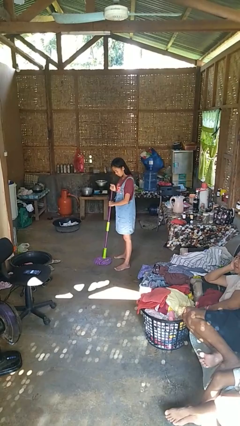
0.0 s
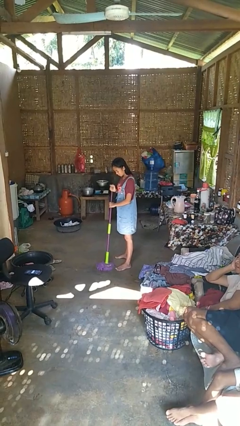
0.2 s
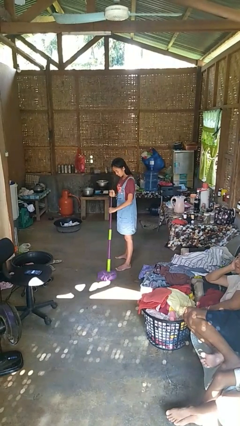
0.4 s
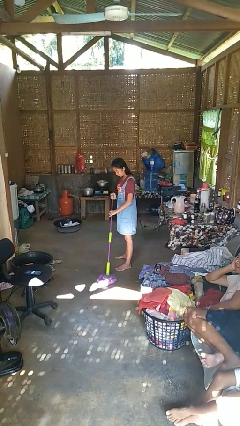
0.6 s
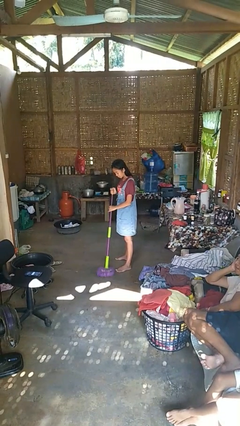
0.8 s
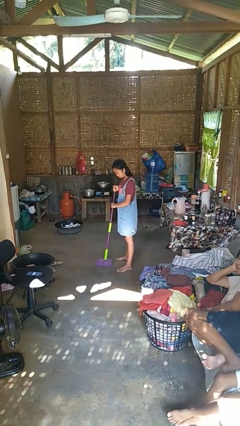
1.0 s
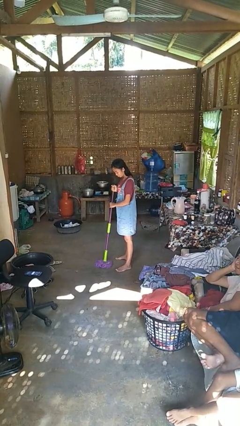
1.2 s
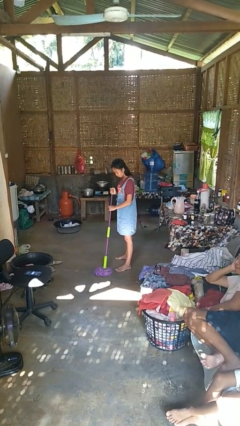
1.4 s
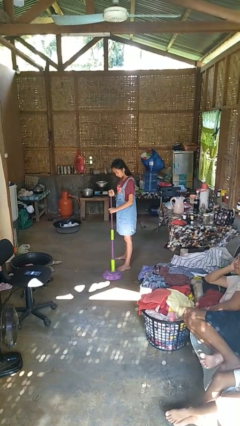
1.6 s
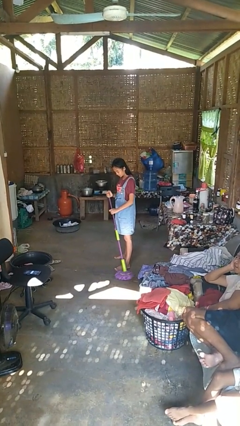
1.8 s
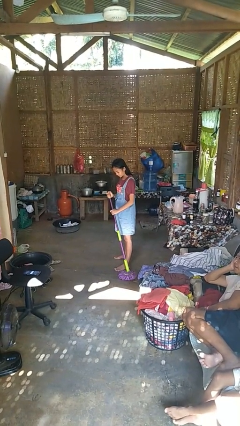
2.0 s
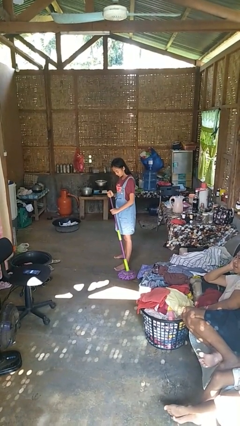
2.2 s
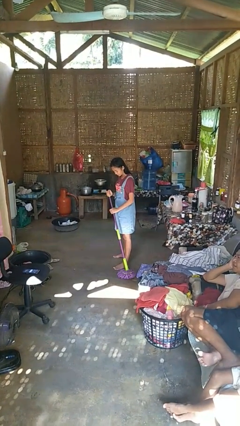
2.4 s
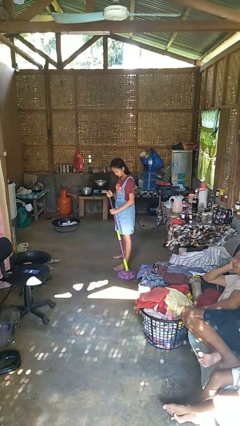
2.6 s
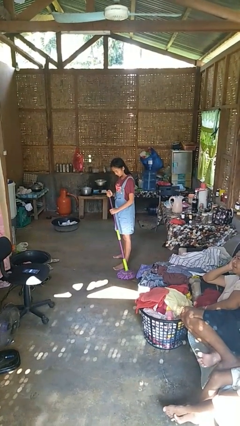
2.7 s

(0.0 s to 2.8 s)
person mops

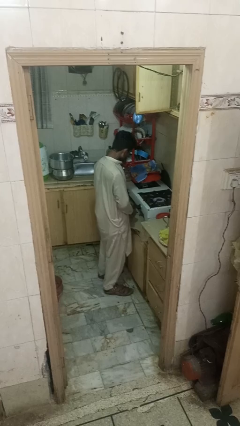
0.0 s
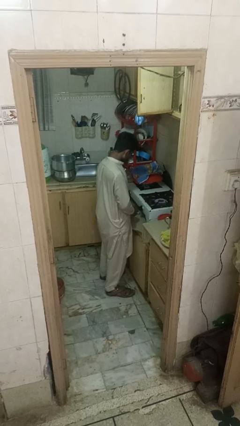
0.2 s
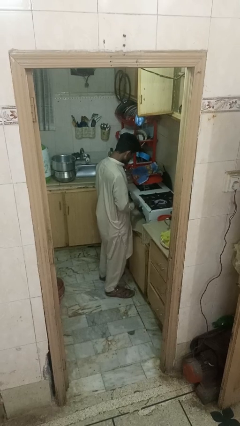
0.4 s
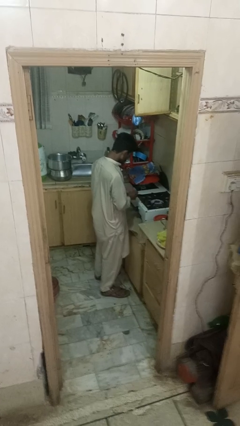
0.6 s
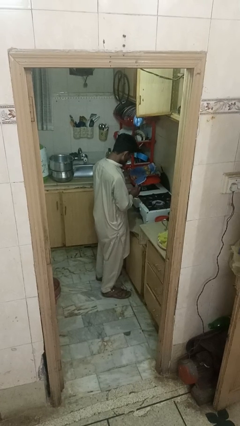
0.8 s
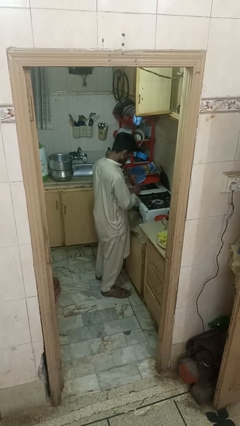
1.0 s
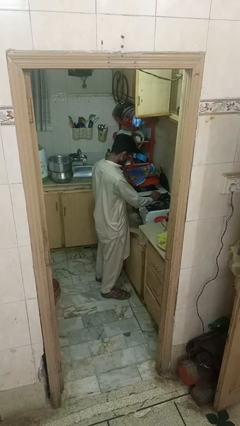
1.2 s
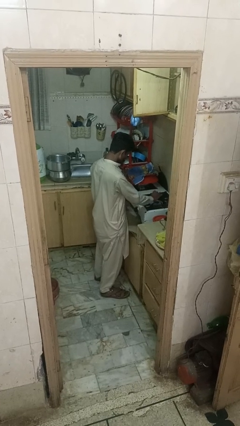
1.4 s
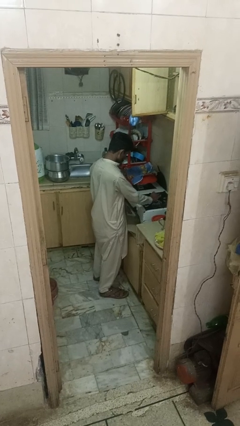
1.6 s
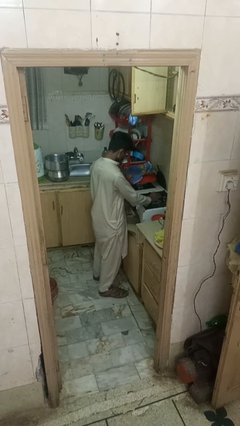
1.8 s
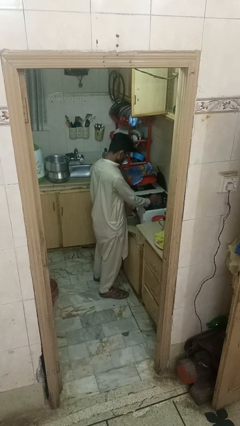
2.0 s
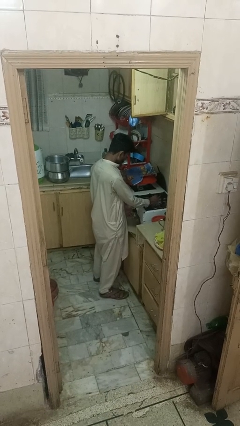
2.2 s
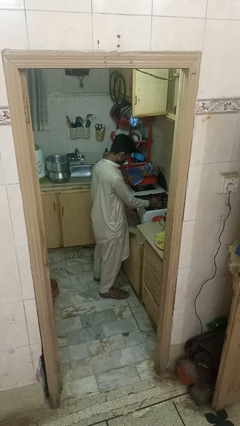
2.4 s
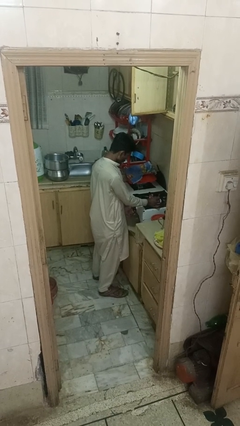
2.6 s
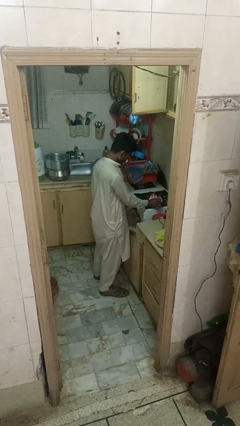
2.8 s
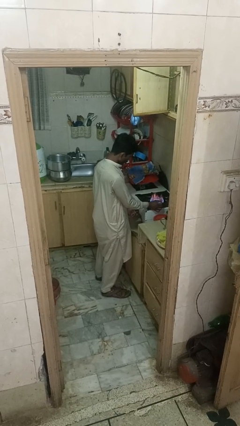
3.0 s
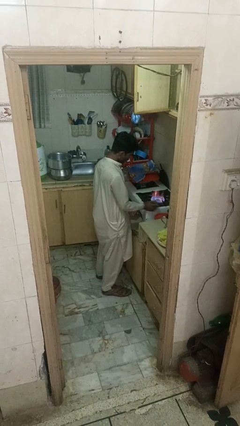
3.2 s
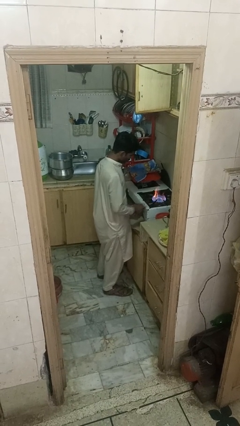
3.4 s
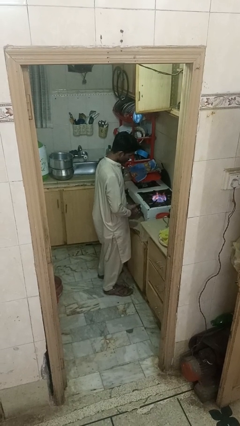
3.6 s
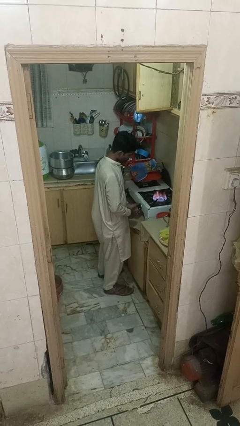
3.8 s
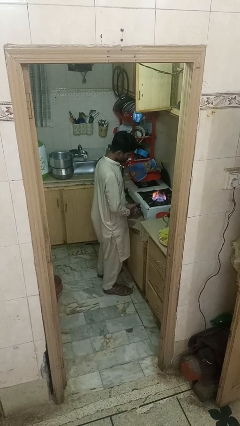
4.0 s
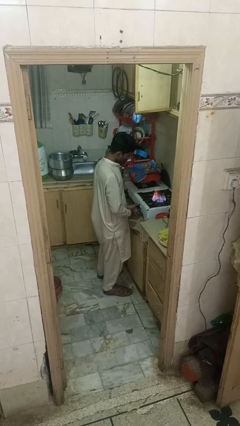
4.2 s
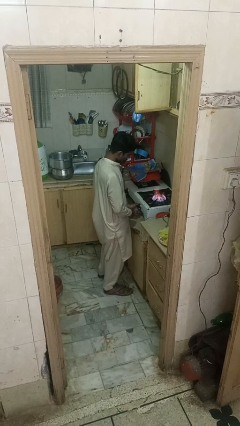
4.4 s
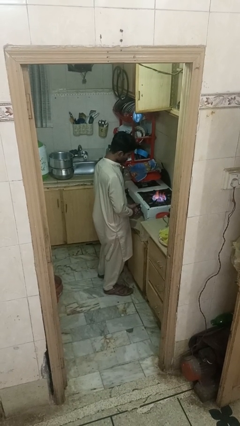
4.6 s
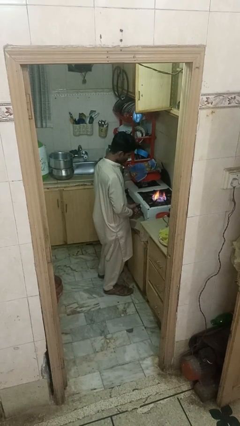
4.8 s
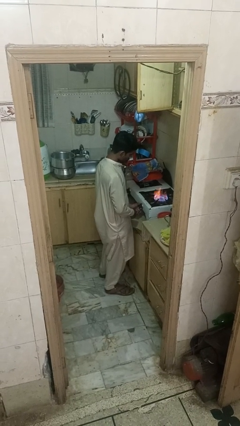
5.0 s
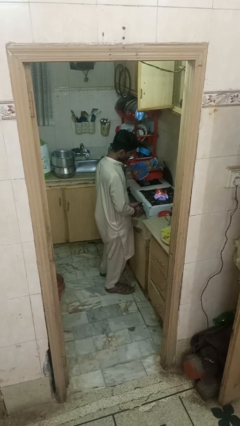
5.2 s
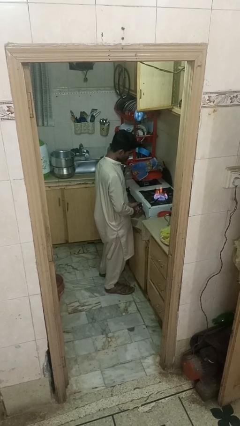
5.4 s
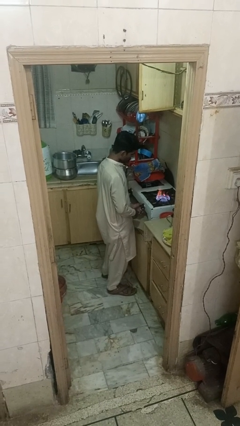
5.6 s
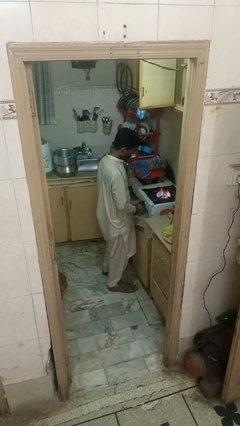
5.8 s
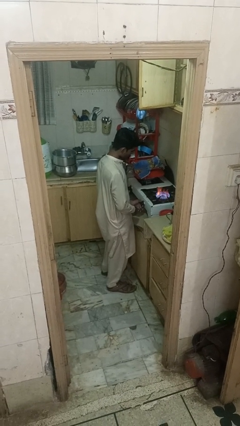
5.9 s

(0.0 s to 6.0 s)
person turns on stovetop

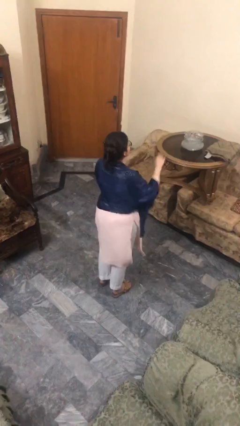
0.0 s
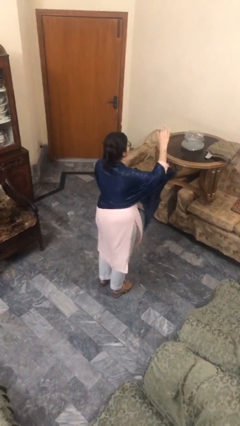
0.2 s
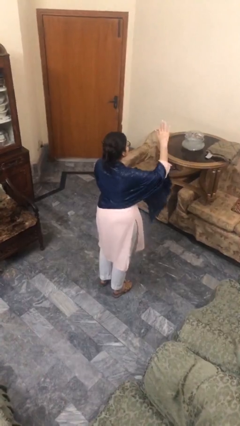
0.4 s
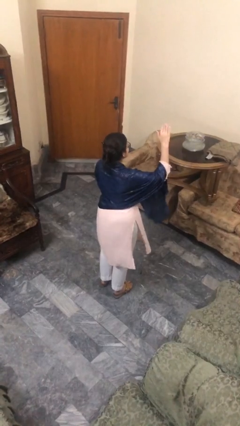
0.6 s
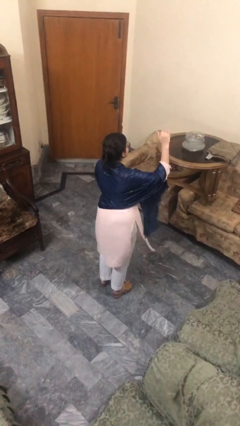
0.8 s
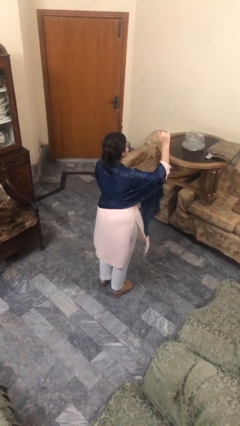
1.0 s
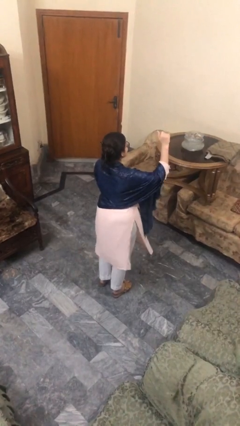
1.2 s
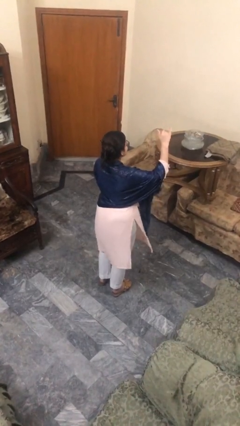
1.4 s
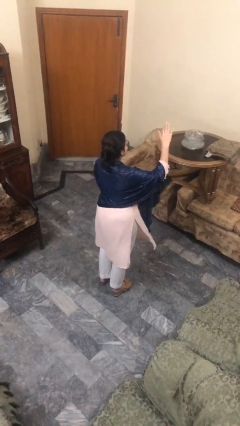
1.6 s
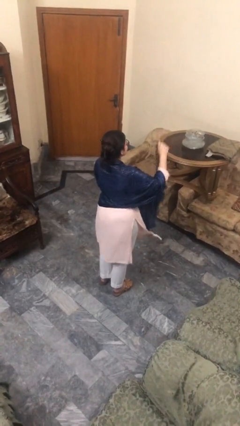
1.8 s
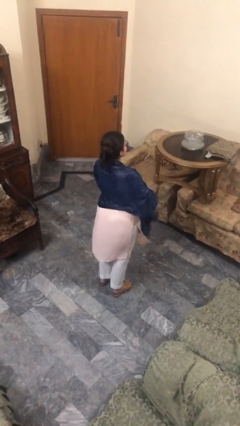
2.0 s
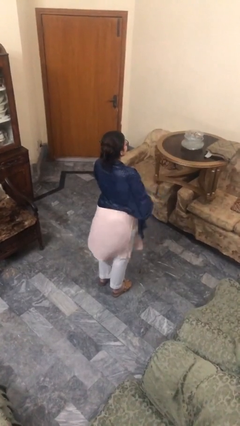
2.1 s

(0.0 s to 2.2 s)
person gestures come here

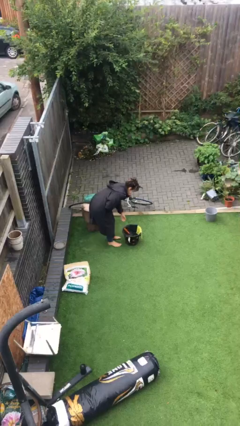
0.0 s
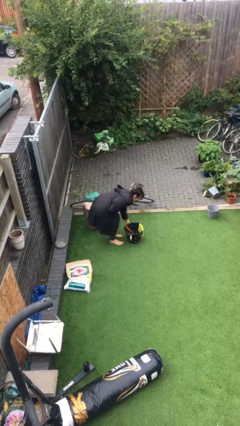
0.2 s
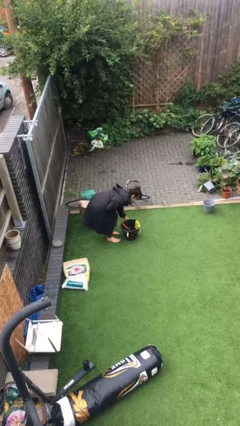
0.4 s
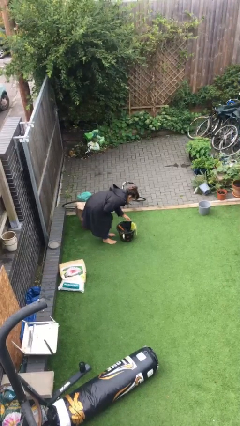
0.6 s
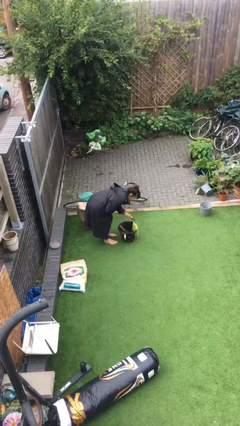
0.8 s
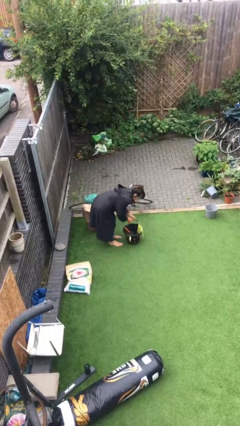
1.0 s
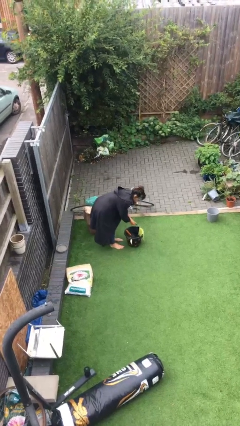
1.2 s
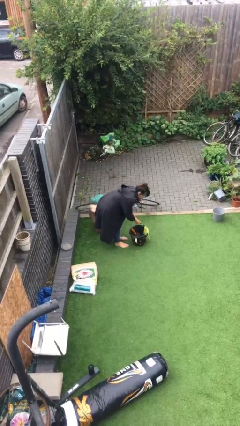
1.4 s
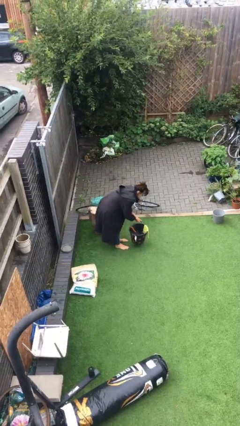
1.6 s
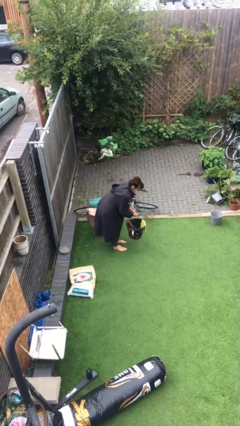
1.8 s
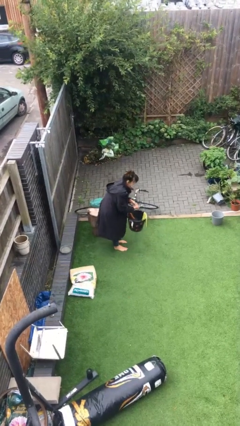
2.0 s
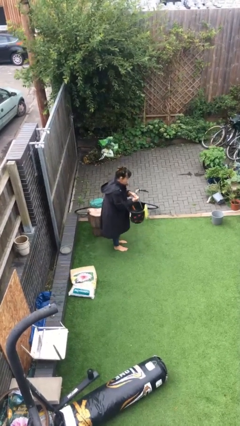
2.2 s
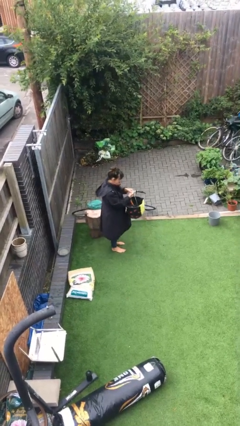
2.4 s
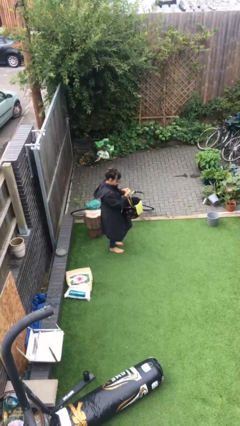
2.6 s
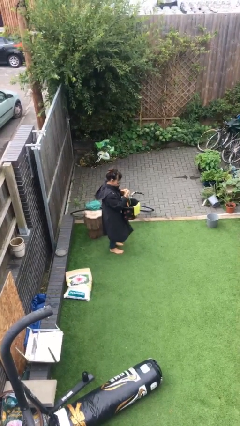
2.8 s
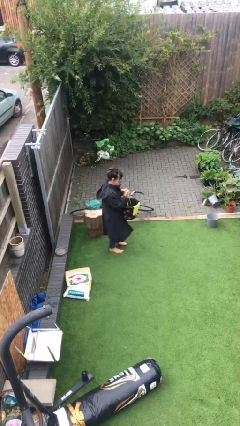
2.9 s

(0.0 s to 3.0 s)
person picks up object from floor

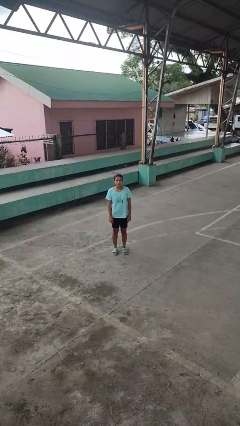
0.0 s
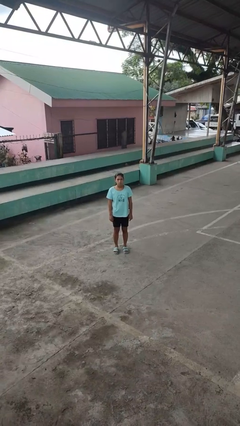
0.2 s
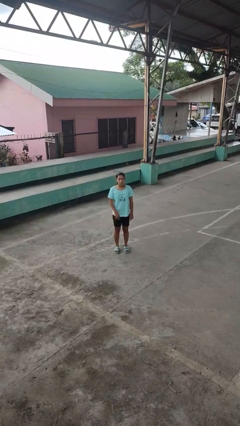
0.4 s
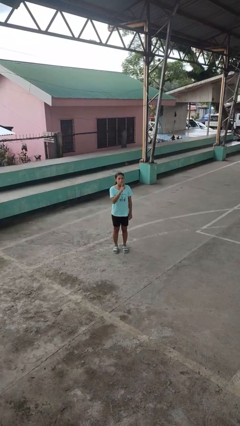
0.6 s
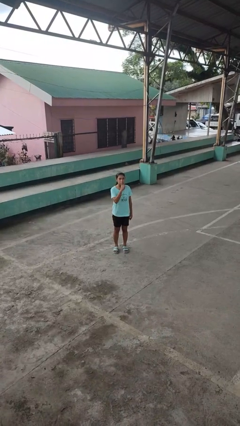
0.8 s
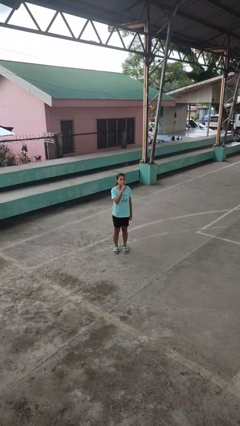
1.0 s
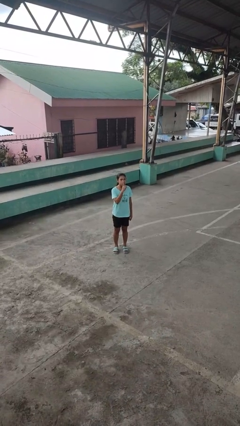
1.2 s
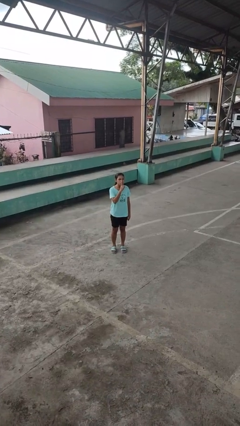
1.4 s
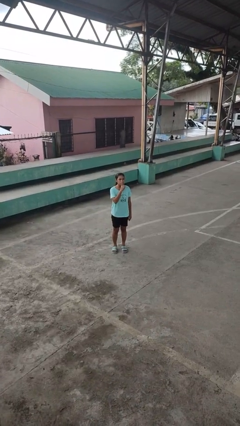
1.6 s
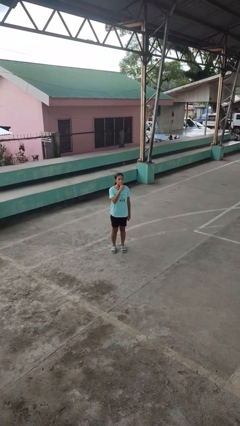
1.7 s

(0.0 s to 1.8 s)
person gestures be quiet

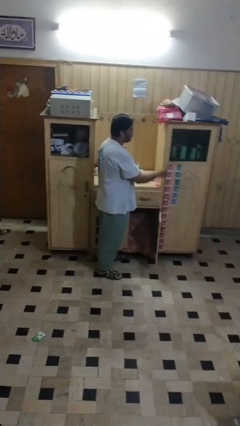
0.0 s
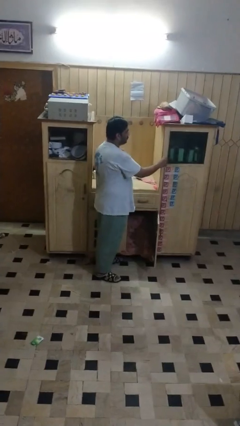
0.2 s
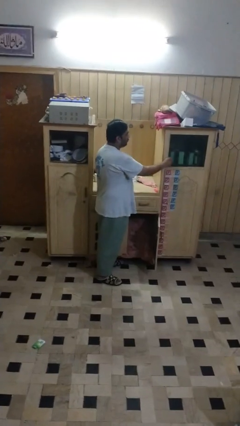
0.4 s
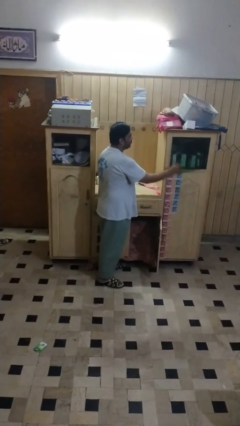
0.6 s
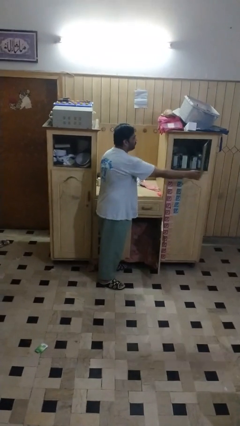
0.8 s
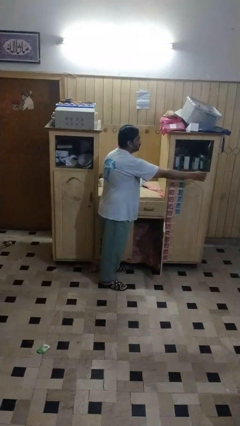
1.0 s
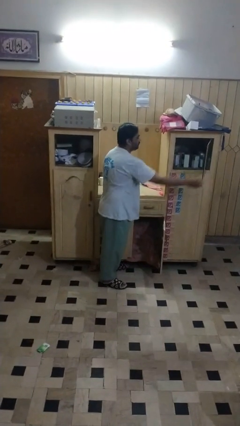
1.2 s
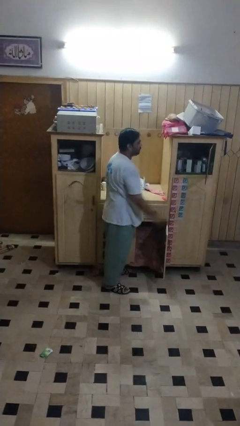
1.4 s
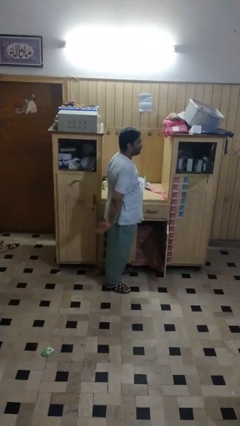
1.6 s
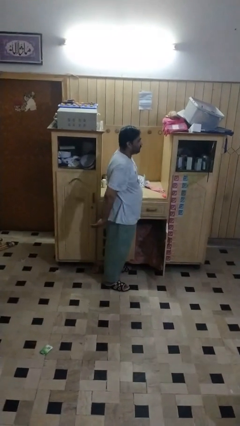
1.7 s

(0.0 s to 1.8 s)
person closes cabinet
